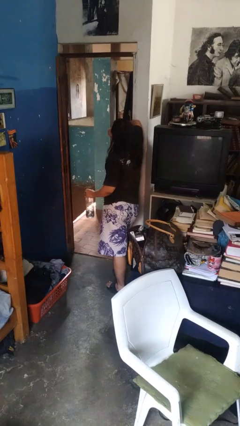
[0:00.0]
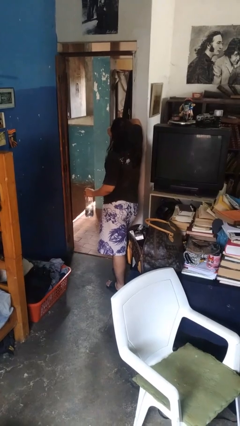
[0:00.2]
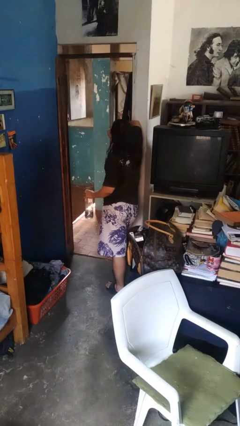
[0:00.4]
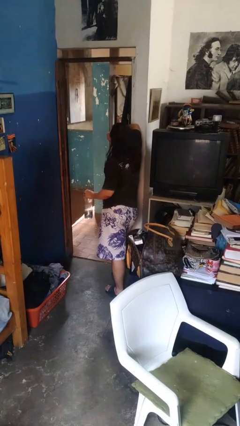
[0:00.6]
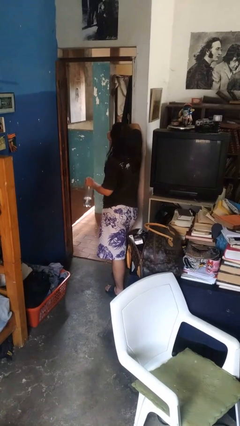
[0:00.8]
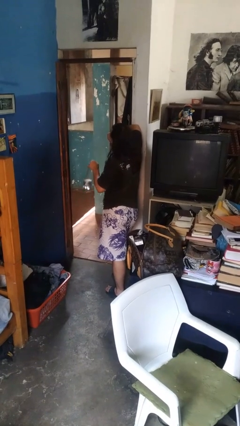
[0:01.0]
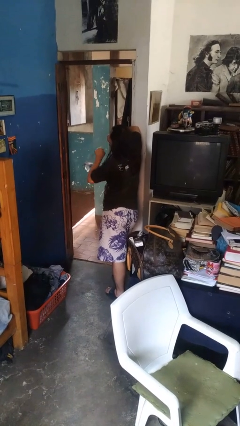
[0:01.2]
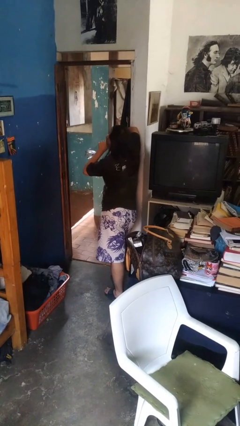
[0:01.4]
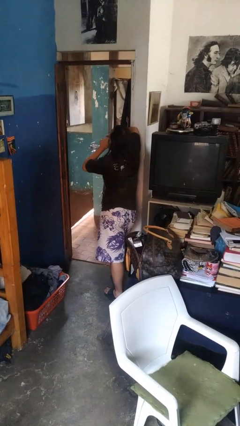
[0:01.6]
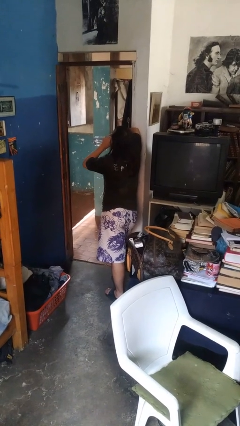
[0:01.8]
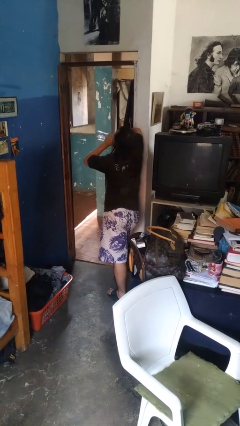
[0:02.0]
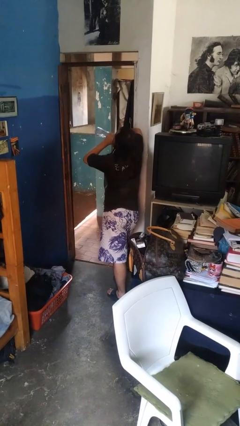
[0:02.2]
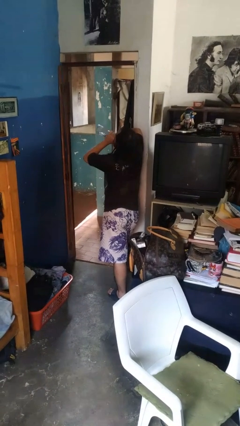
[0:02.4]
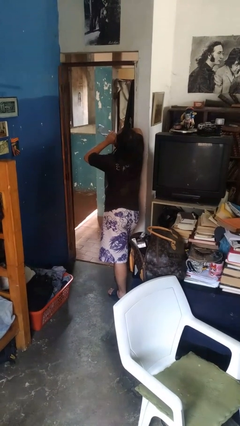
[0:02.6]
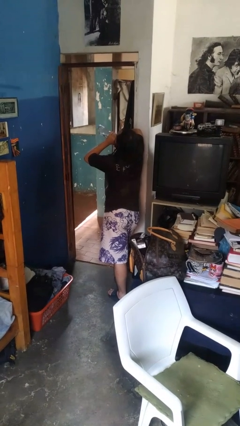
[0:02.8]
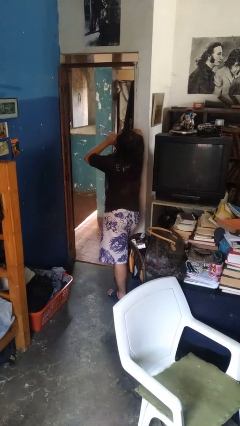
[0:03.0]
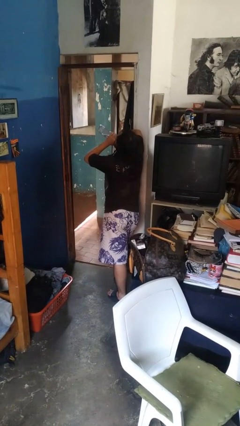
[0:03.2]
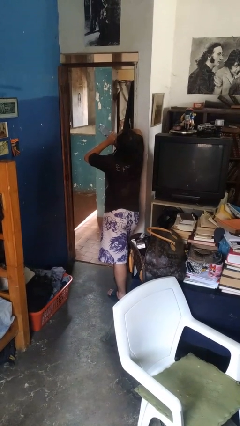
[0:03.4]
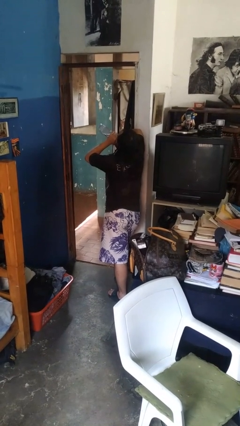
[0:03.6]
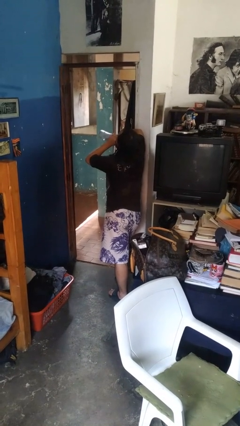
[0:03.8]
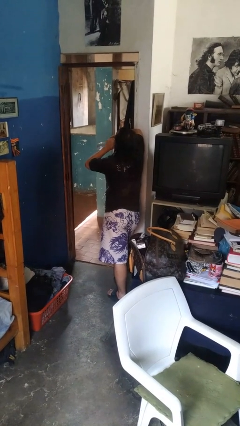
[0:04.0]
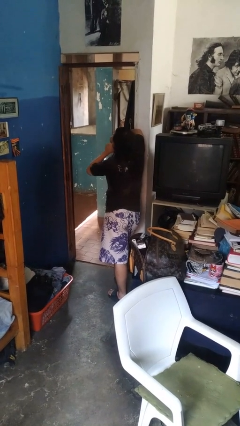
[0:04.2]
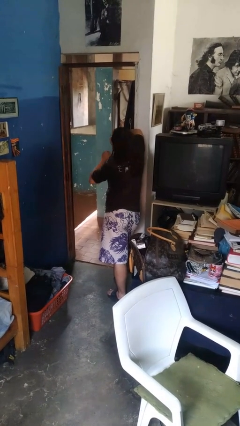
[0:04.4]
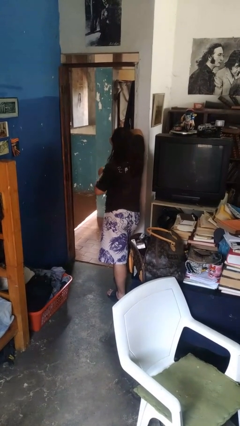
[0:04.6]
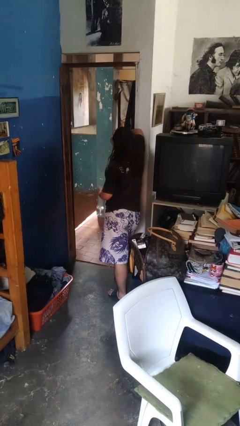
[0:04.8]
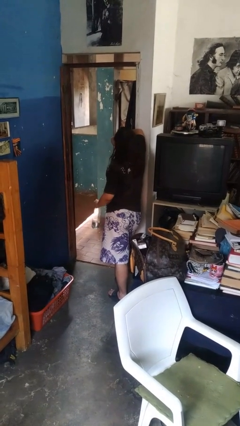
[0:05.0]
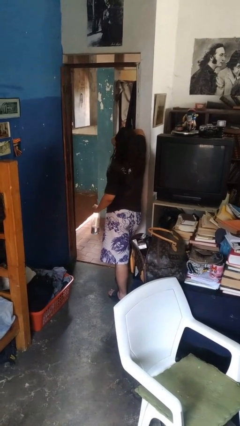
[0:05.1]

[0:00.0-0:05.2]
person drinks from bottle

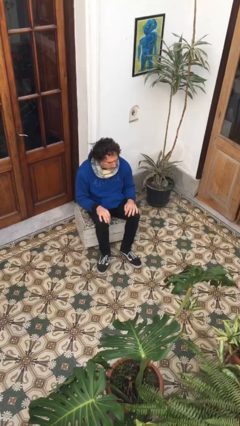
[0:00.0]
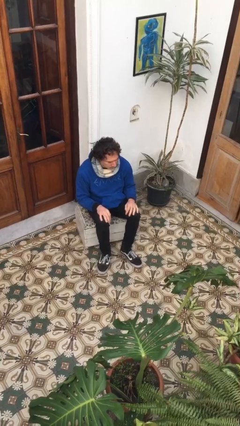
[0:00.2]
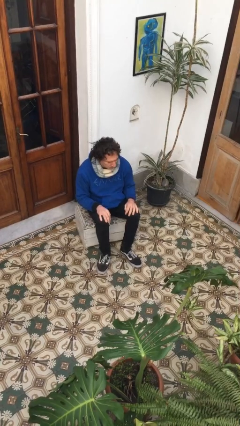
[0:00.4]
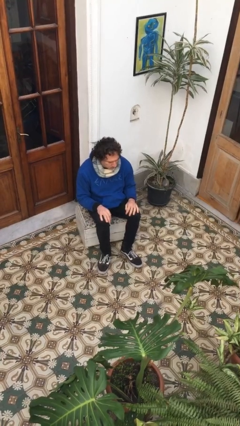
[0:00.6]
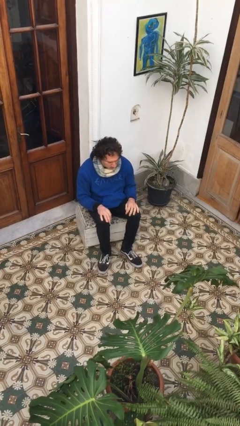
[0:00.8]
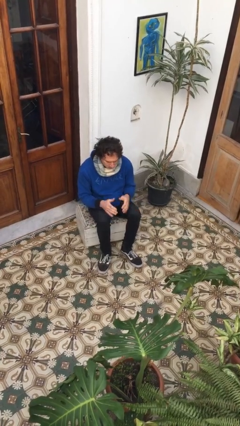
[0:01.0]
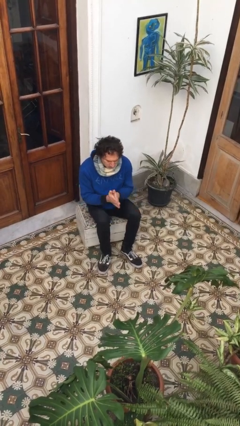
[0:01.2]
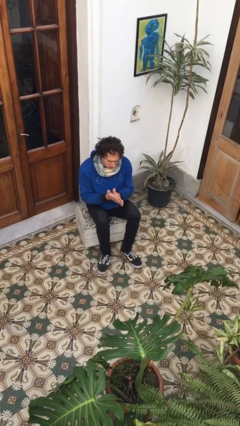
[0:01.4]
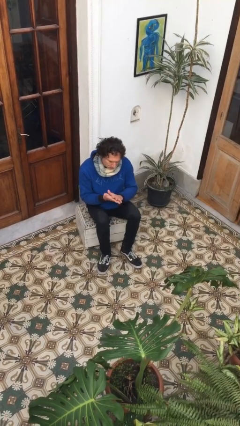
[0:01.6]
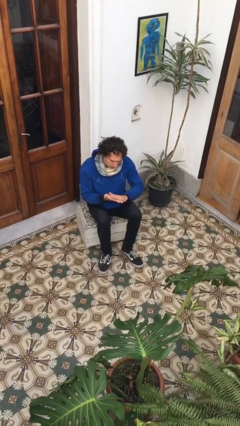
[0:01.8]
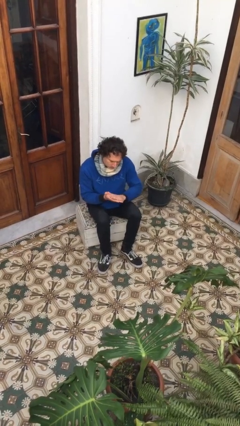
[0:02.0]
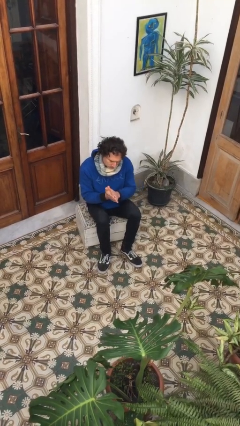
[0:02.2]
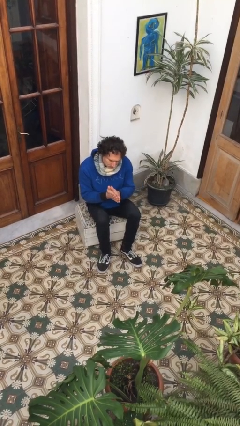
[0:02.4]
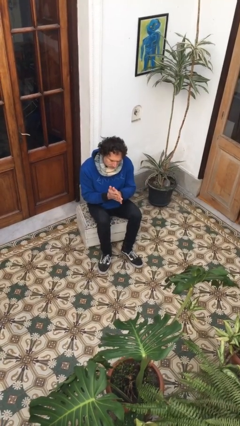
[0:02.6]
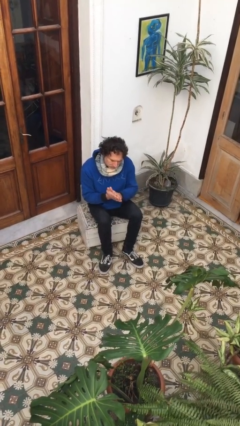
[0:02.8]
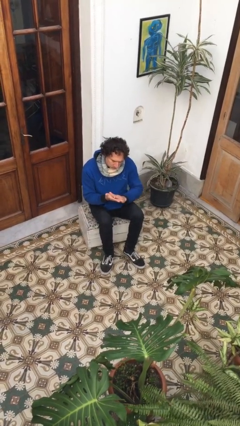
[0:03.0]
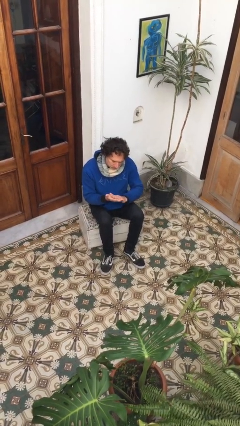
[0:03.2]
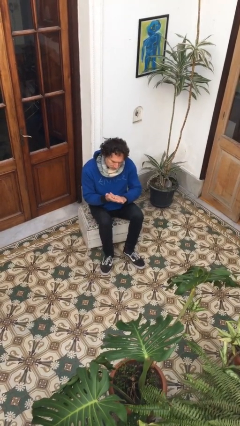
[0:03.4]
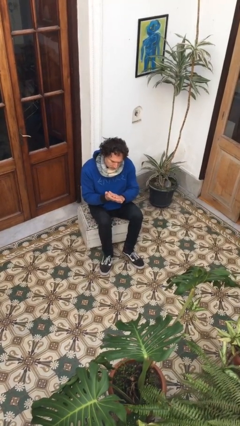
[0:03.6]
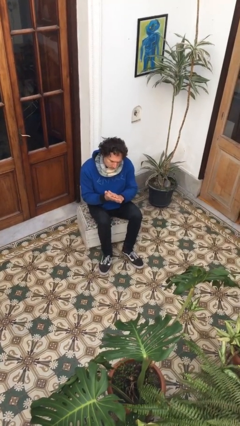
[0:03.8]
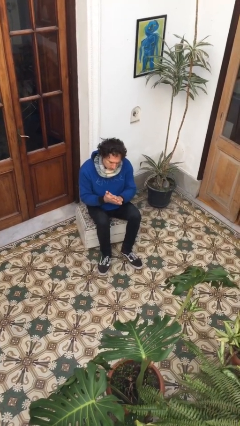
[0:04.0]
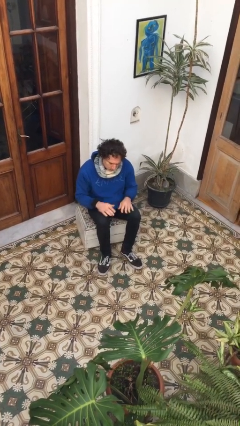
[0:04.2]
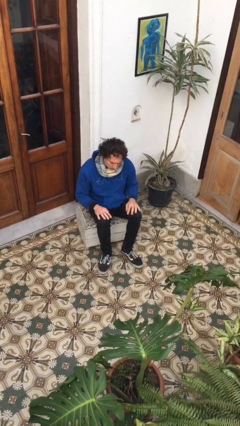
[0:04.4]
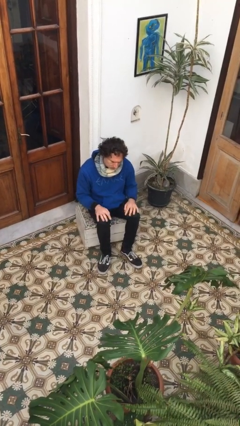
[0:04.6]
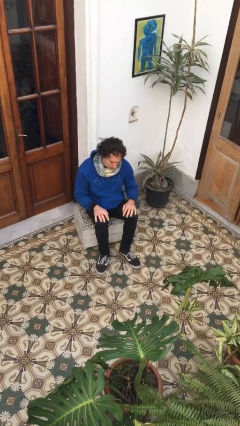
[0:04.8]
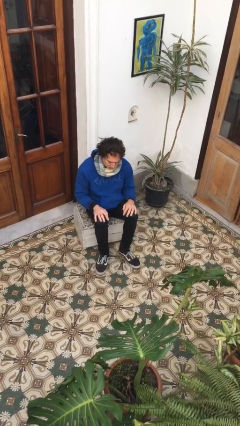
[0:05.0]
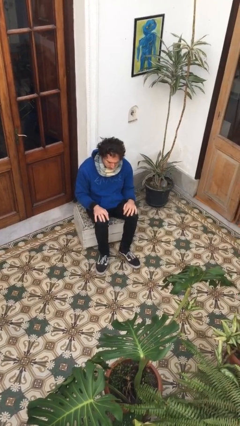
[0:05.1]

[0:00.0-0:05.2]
person looks at hands in lap

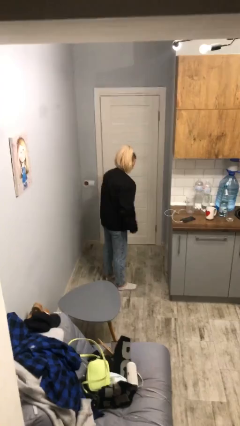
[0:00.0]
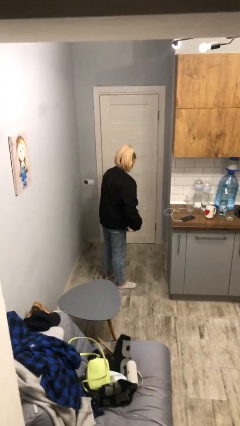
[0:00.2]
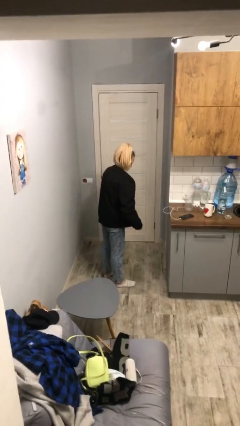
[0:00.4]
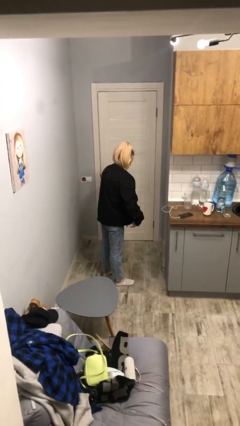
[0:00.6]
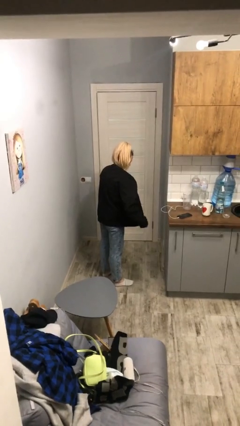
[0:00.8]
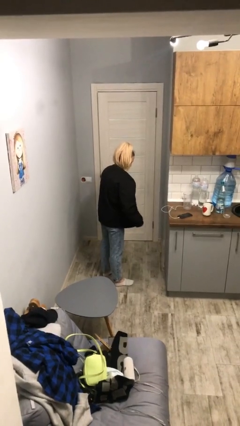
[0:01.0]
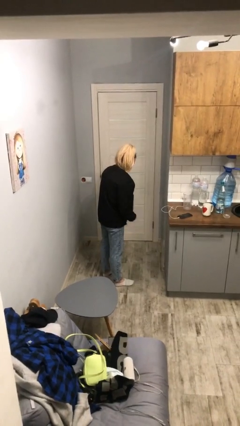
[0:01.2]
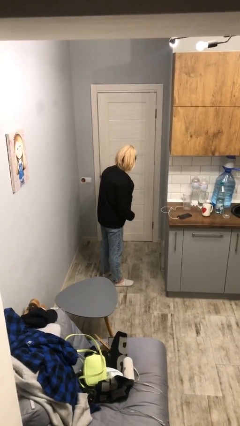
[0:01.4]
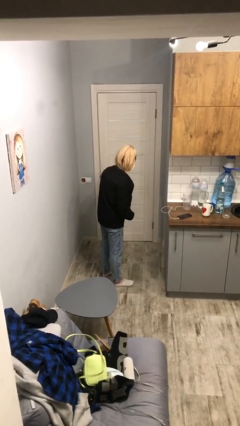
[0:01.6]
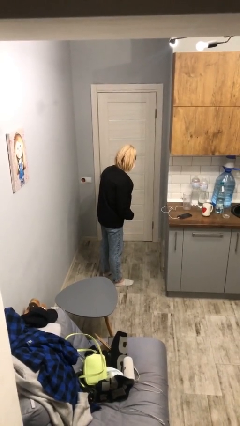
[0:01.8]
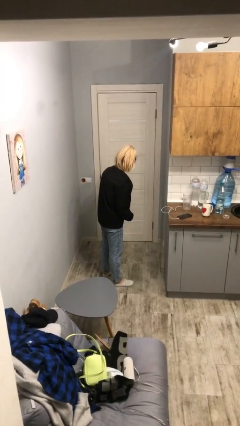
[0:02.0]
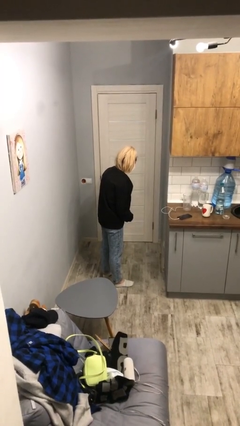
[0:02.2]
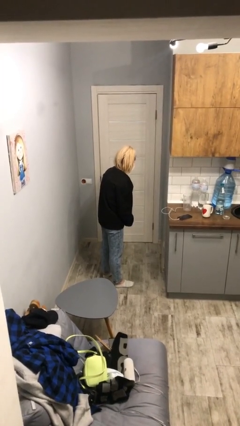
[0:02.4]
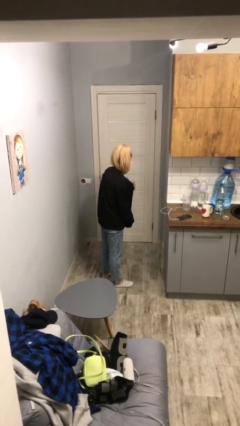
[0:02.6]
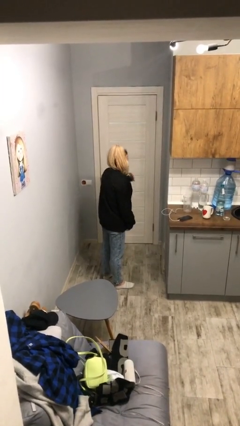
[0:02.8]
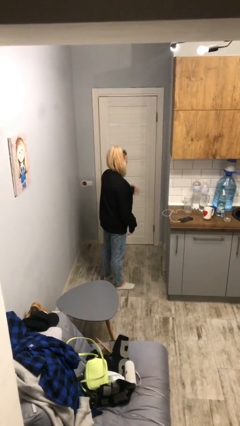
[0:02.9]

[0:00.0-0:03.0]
person zips up jacket

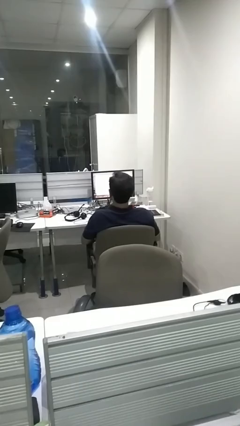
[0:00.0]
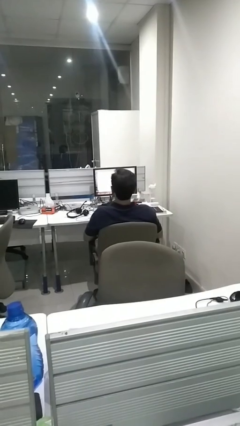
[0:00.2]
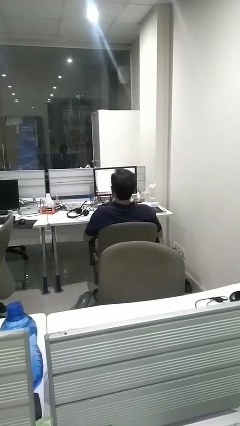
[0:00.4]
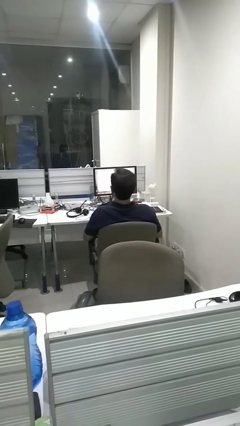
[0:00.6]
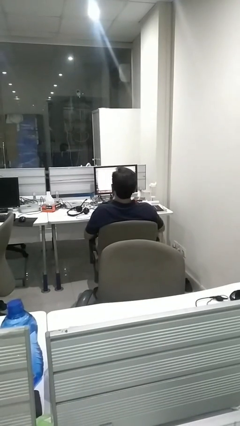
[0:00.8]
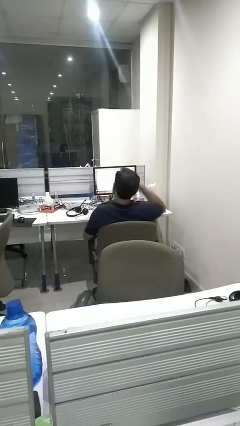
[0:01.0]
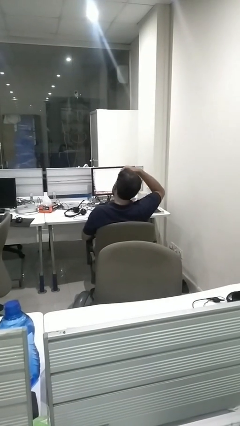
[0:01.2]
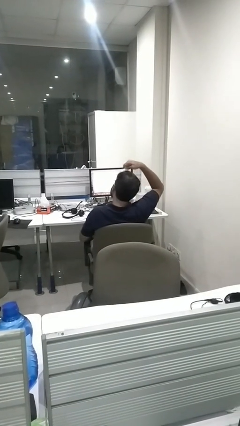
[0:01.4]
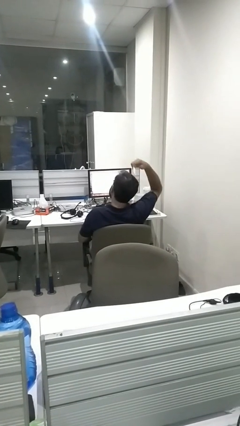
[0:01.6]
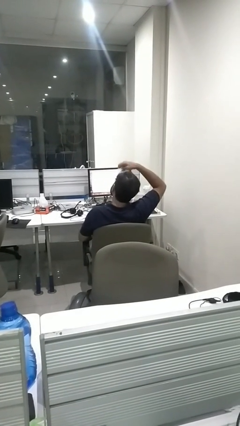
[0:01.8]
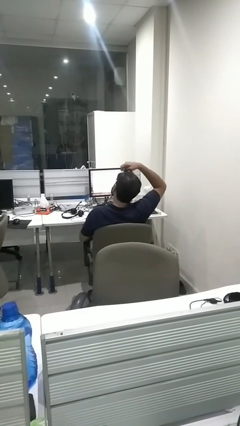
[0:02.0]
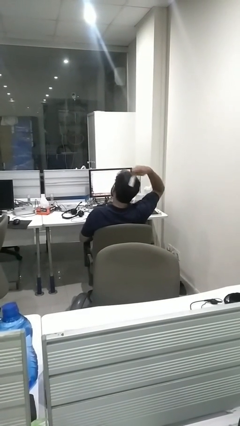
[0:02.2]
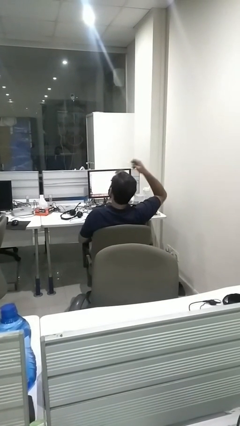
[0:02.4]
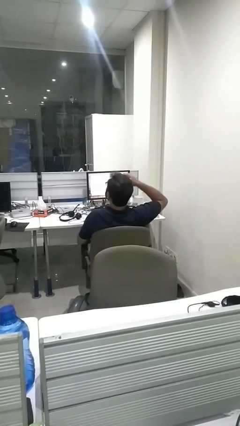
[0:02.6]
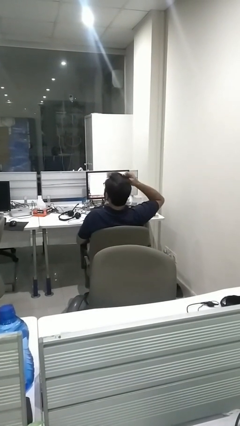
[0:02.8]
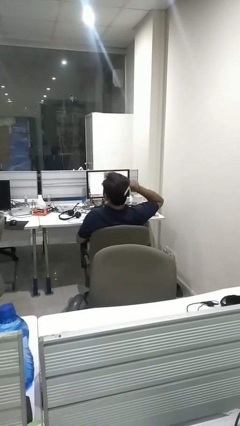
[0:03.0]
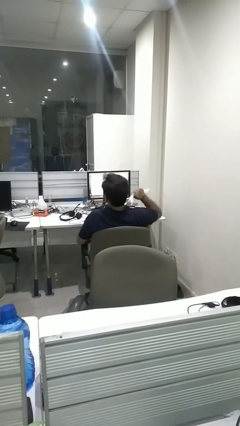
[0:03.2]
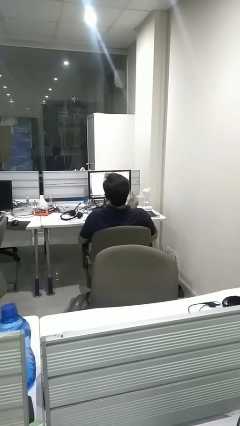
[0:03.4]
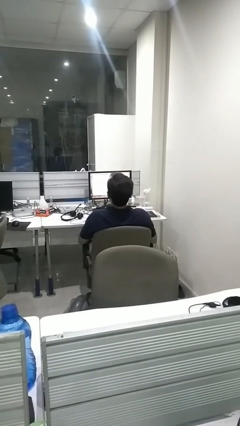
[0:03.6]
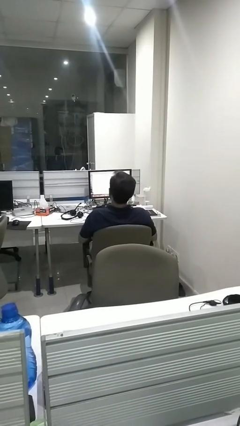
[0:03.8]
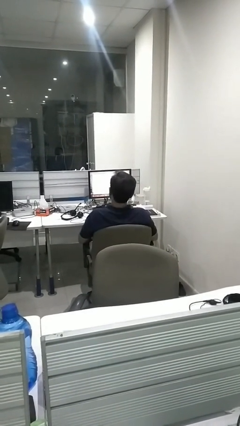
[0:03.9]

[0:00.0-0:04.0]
person brushes hair

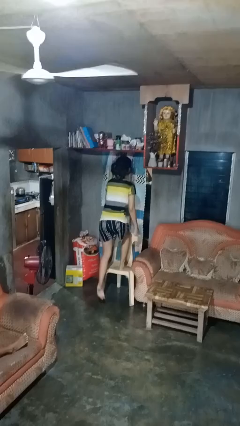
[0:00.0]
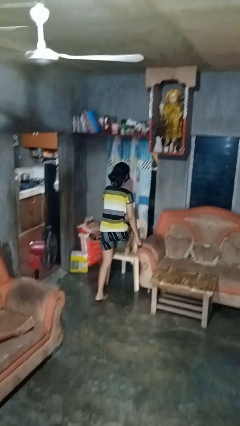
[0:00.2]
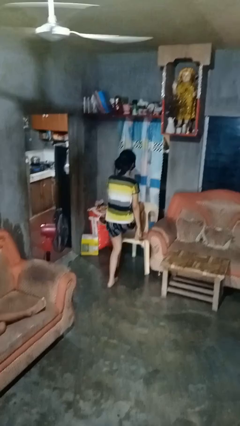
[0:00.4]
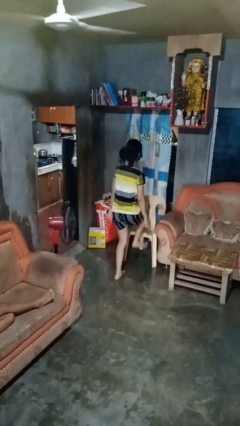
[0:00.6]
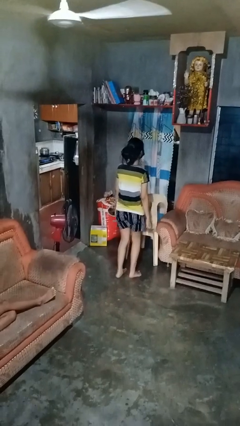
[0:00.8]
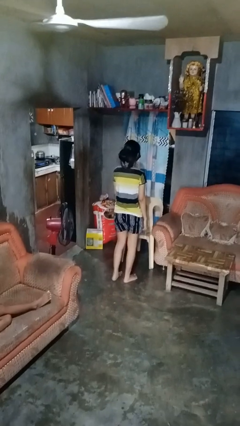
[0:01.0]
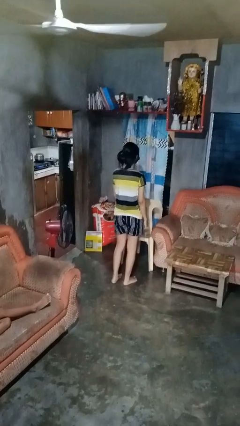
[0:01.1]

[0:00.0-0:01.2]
person climbs off chair
